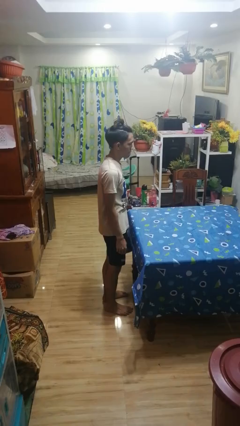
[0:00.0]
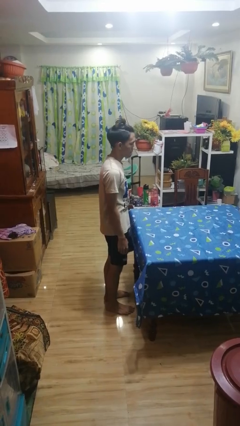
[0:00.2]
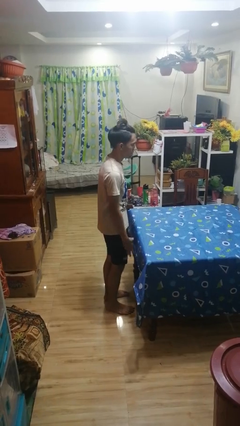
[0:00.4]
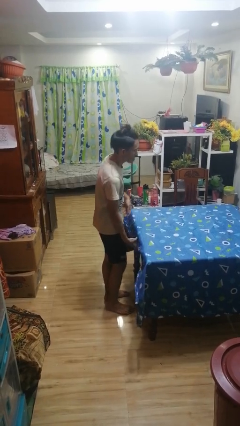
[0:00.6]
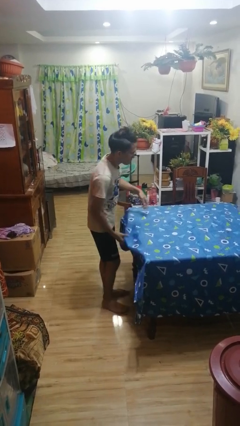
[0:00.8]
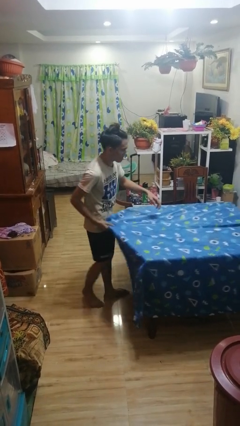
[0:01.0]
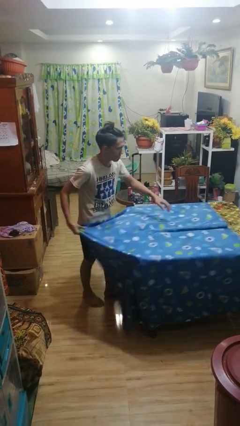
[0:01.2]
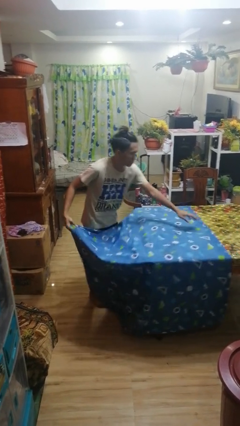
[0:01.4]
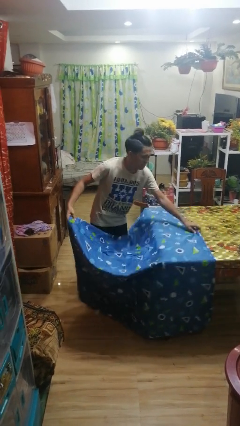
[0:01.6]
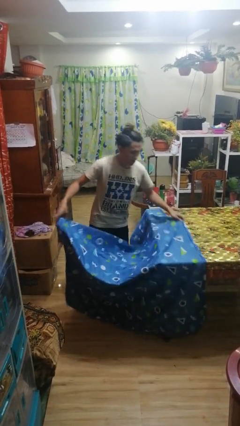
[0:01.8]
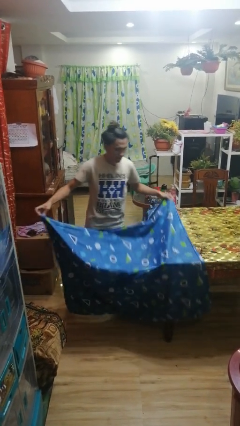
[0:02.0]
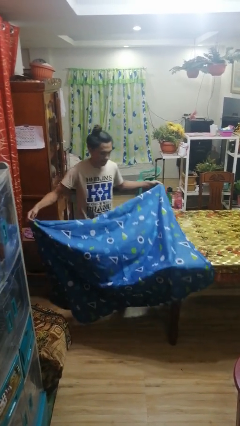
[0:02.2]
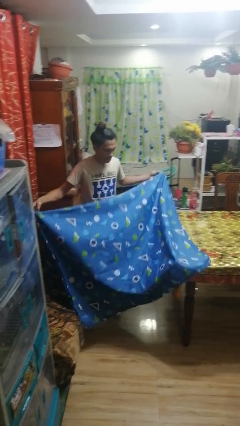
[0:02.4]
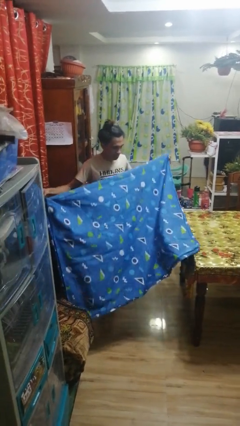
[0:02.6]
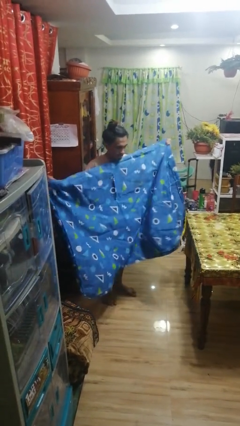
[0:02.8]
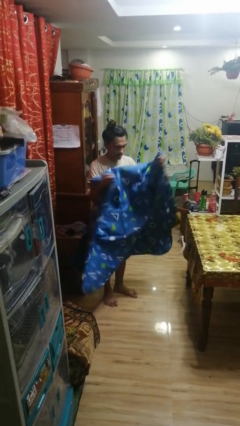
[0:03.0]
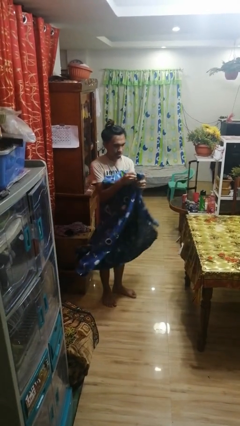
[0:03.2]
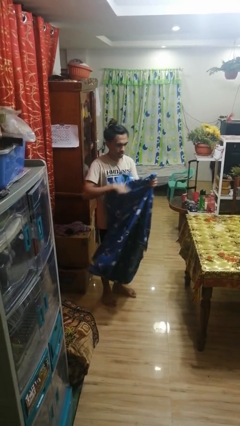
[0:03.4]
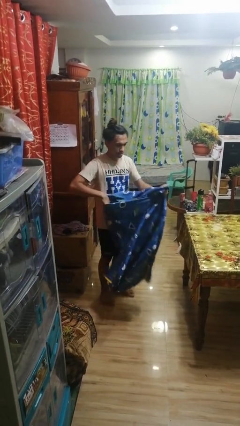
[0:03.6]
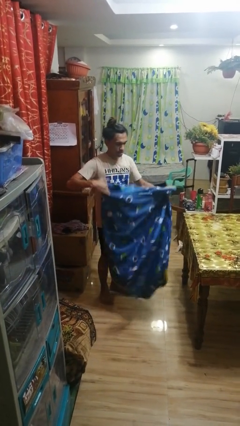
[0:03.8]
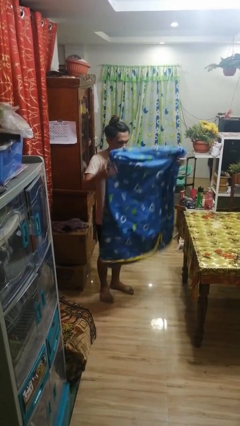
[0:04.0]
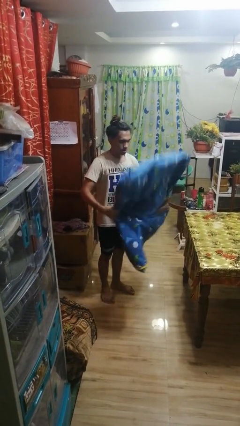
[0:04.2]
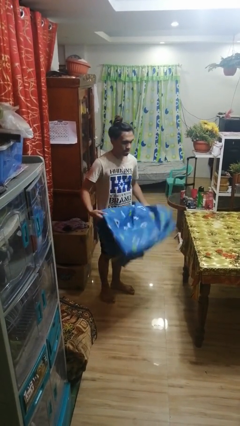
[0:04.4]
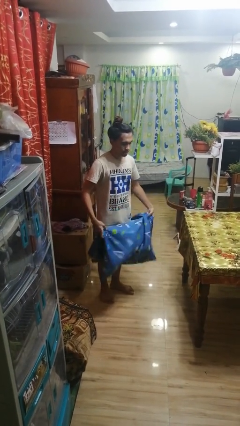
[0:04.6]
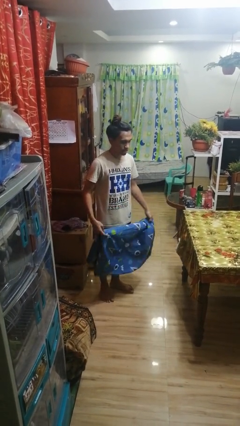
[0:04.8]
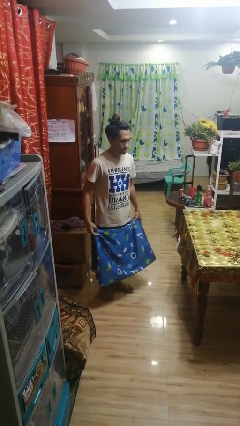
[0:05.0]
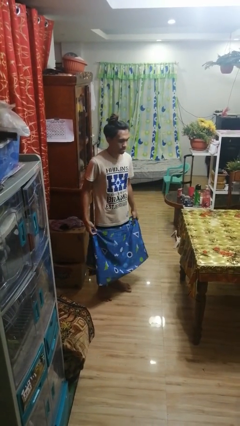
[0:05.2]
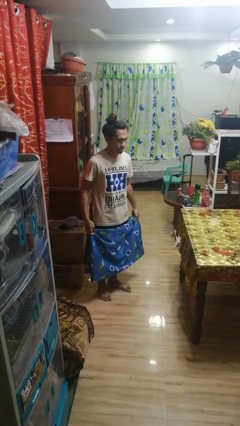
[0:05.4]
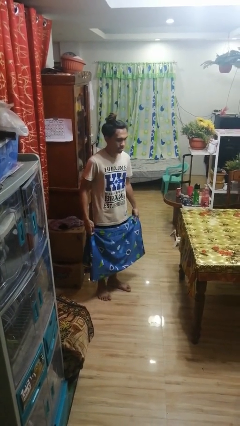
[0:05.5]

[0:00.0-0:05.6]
person folds tablecloth

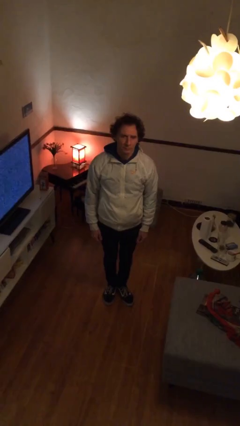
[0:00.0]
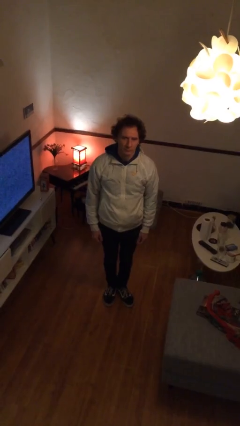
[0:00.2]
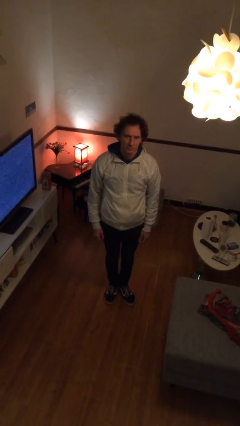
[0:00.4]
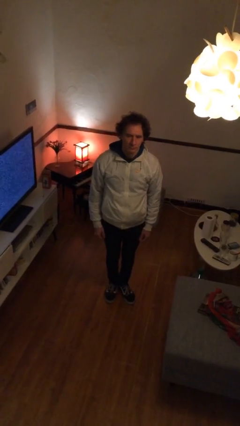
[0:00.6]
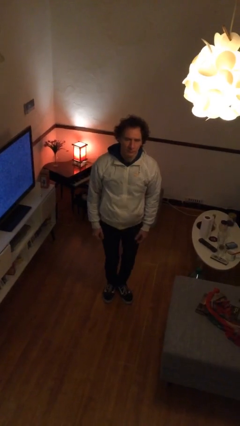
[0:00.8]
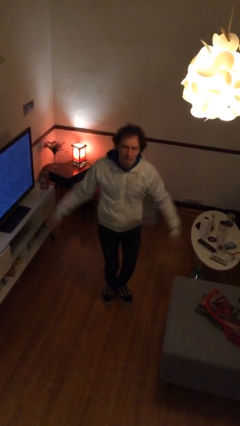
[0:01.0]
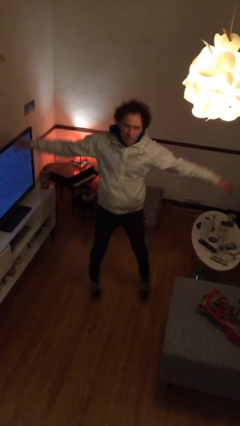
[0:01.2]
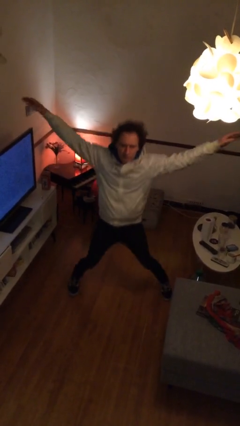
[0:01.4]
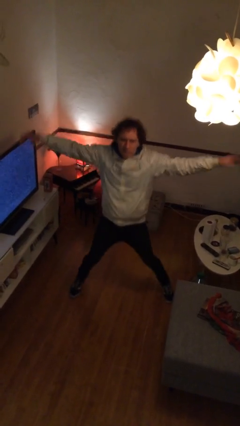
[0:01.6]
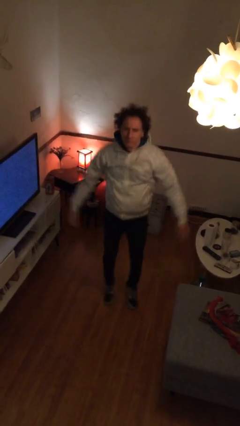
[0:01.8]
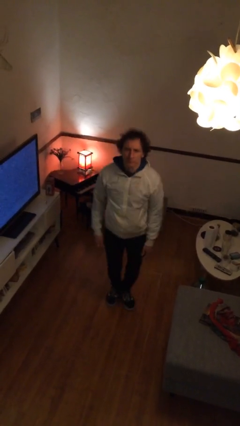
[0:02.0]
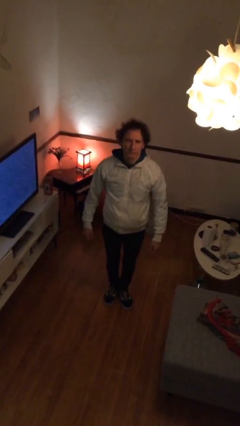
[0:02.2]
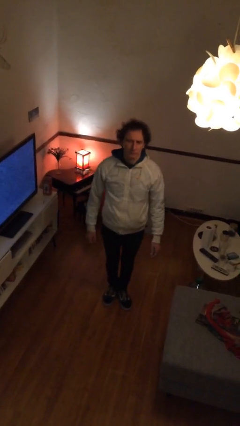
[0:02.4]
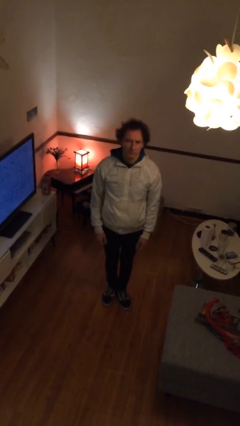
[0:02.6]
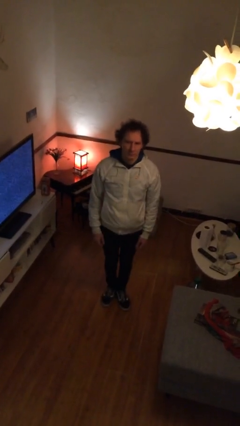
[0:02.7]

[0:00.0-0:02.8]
person exercises with jumping jacks

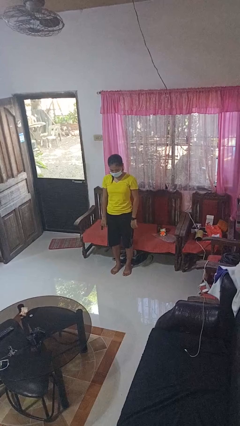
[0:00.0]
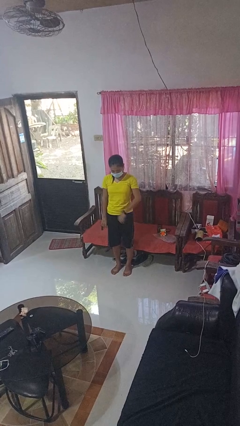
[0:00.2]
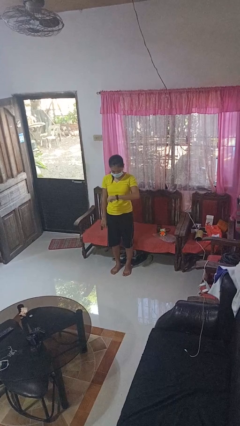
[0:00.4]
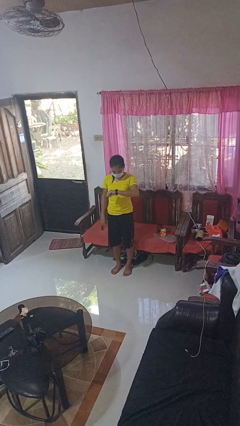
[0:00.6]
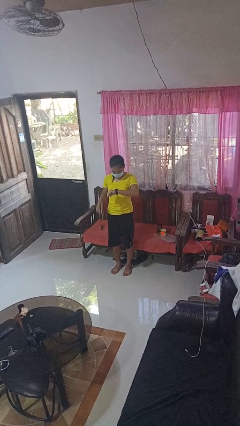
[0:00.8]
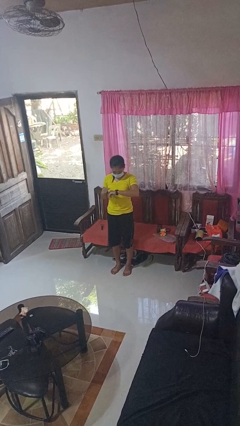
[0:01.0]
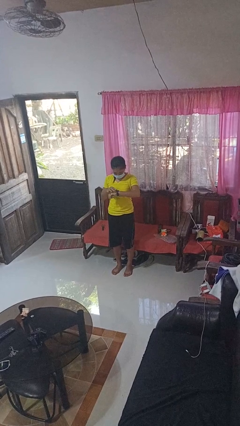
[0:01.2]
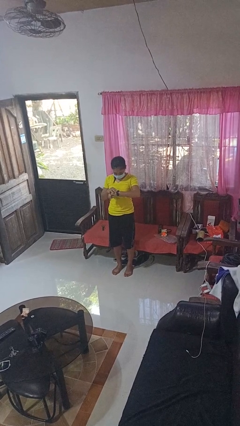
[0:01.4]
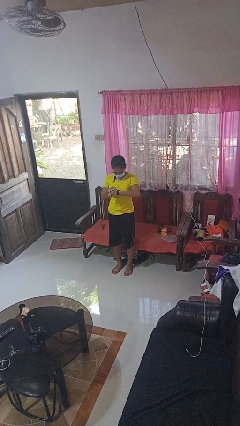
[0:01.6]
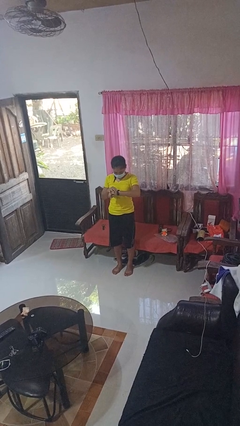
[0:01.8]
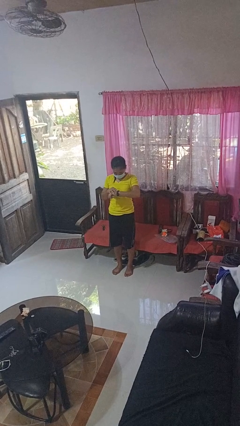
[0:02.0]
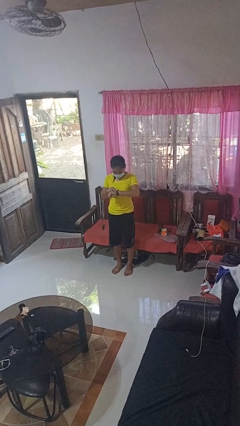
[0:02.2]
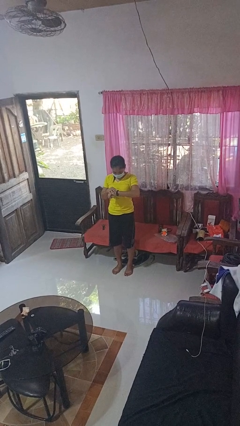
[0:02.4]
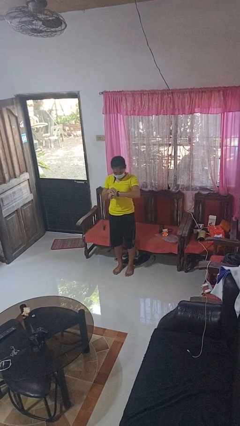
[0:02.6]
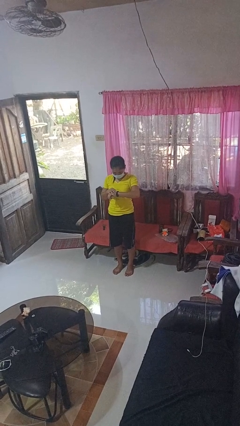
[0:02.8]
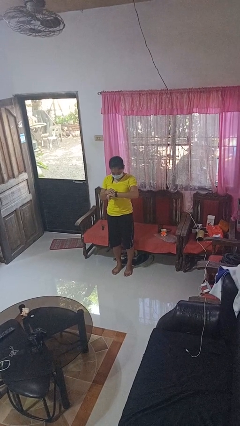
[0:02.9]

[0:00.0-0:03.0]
person looks at wristwatch

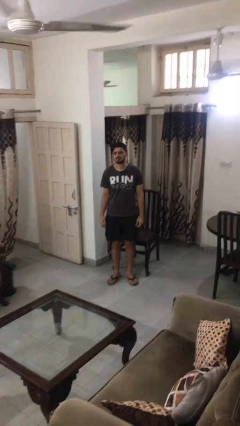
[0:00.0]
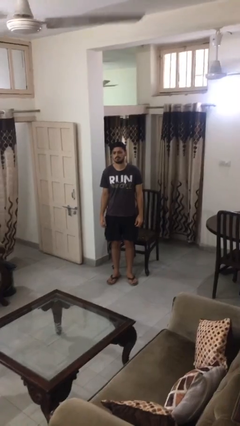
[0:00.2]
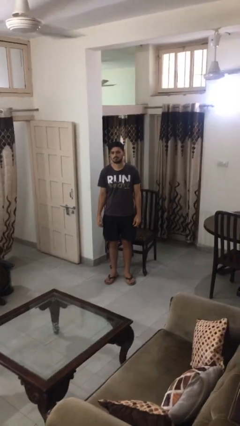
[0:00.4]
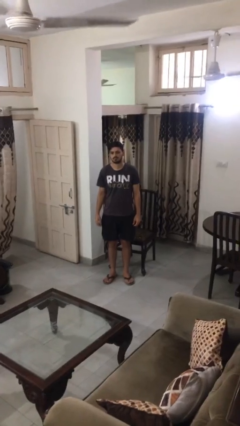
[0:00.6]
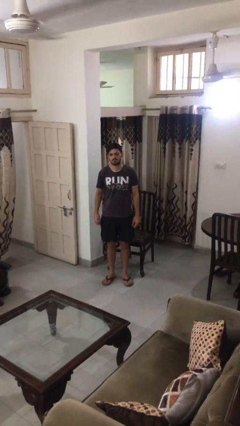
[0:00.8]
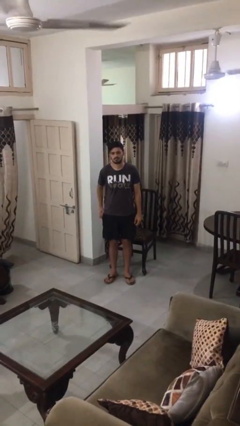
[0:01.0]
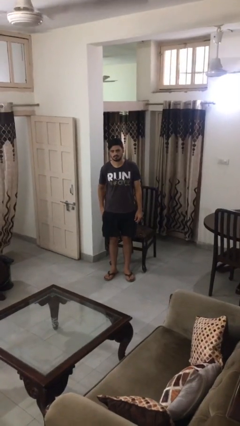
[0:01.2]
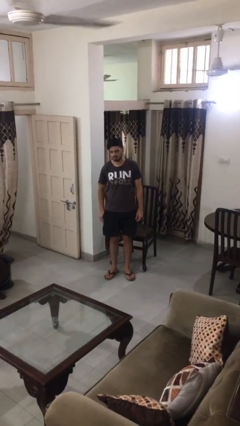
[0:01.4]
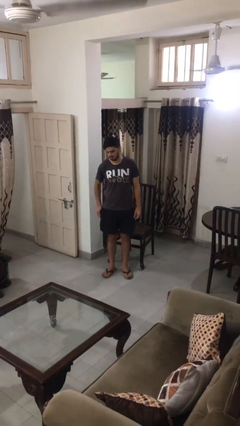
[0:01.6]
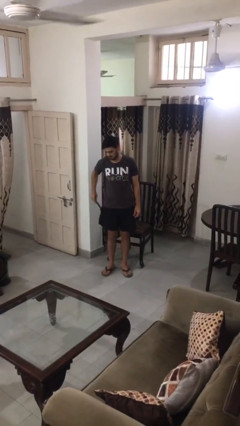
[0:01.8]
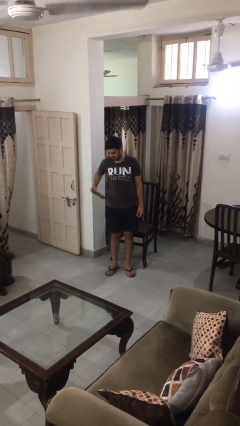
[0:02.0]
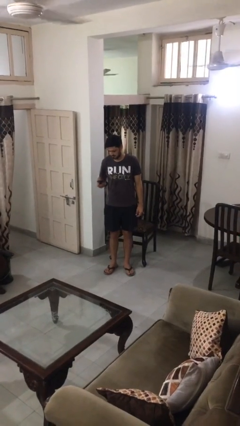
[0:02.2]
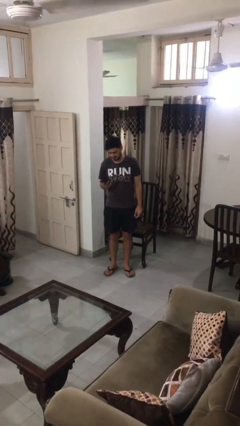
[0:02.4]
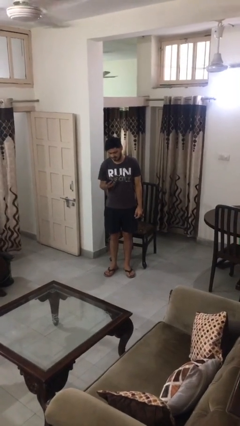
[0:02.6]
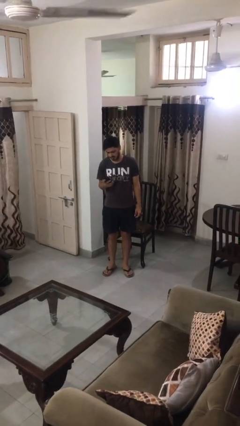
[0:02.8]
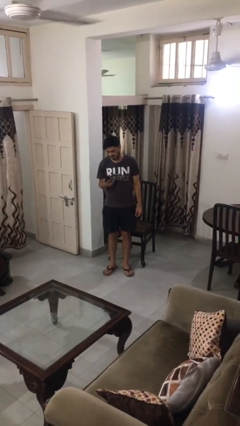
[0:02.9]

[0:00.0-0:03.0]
person takes phone from pocket

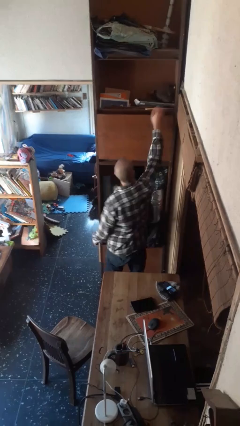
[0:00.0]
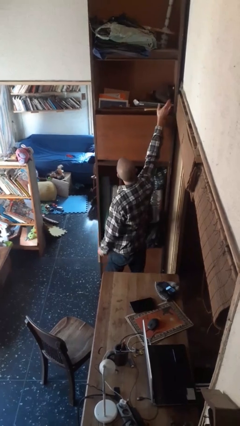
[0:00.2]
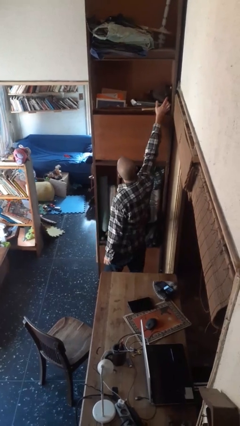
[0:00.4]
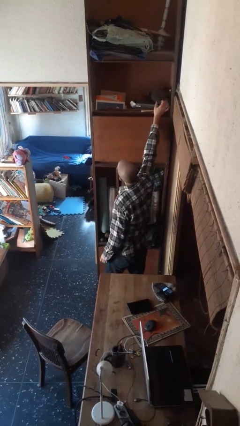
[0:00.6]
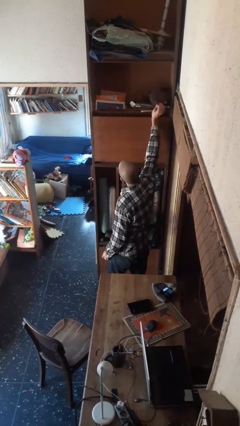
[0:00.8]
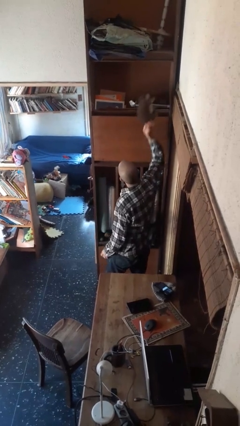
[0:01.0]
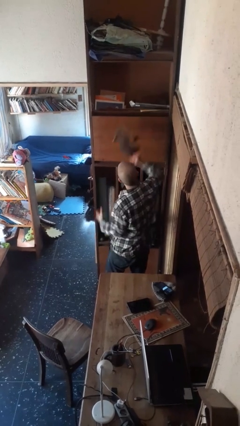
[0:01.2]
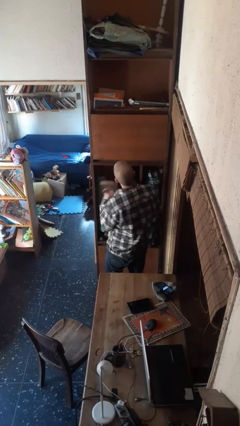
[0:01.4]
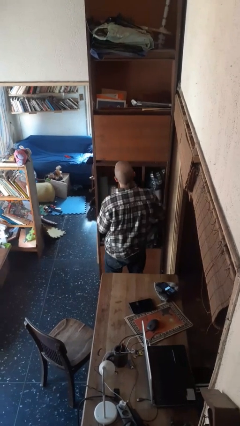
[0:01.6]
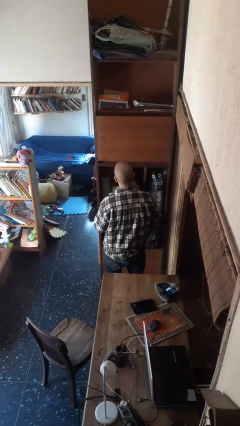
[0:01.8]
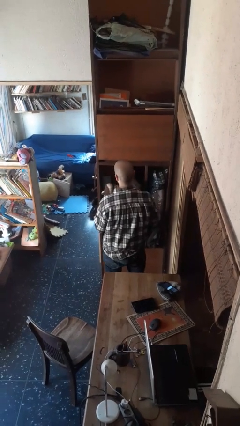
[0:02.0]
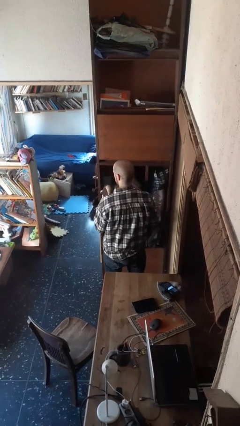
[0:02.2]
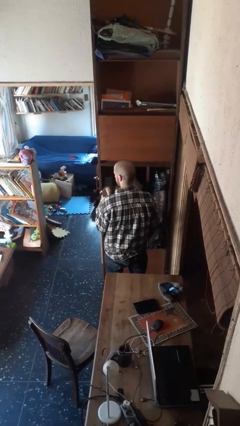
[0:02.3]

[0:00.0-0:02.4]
person picks up object from shelf

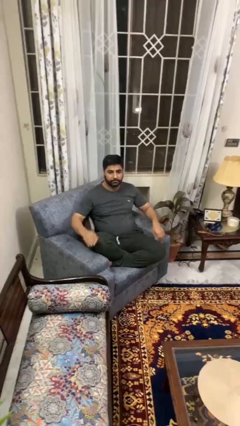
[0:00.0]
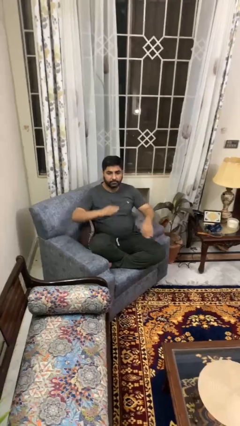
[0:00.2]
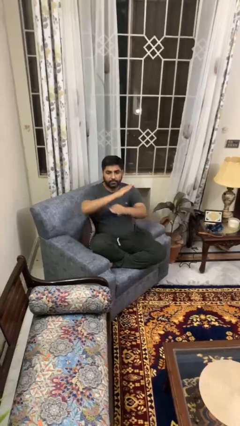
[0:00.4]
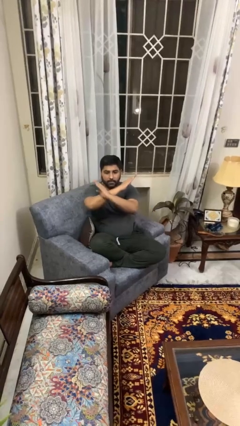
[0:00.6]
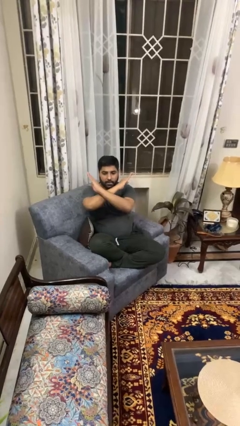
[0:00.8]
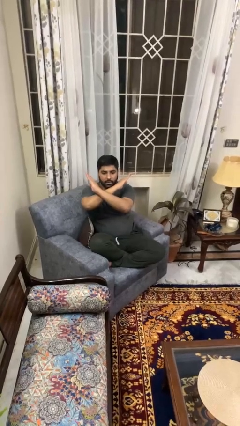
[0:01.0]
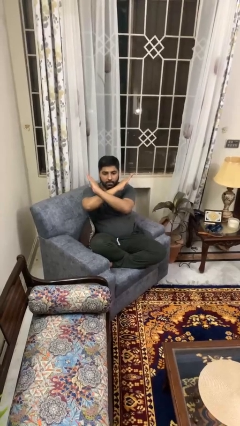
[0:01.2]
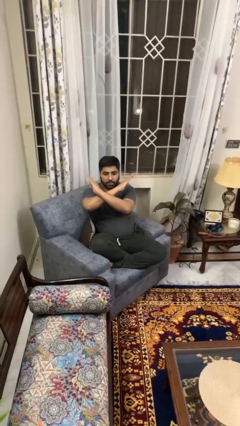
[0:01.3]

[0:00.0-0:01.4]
person gestures arms x
